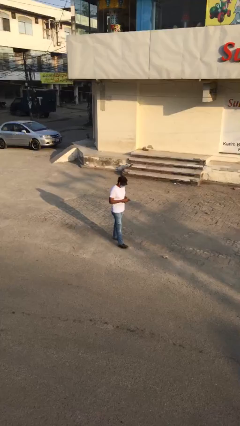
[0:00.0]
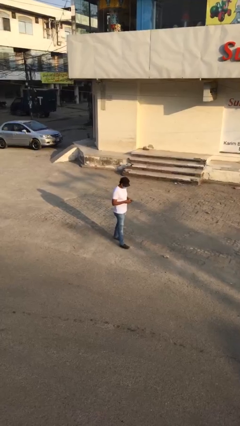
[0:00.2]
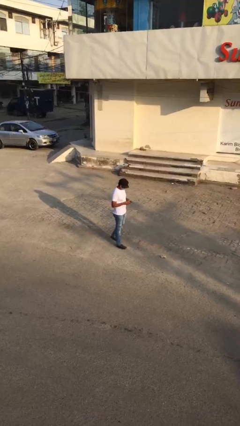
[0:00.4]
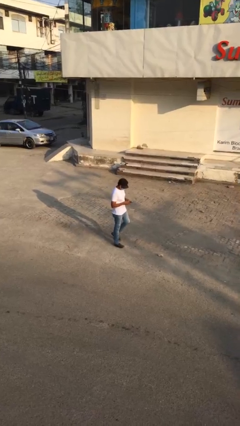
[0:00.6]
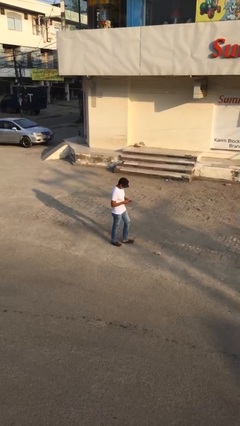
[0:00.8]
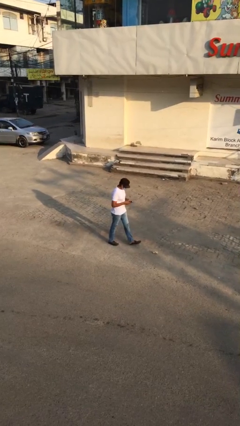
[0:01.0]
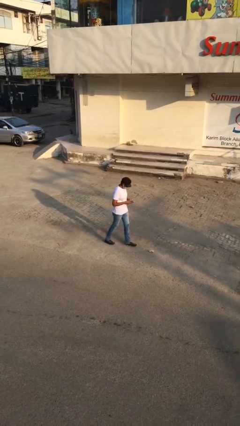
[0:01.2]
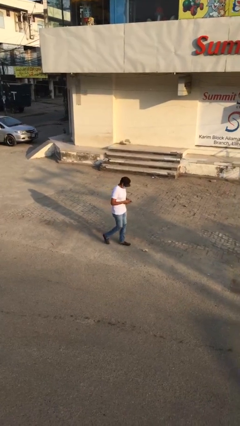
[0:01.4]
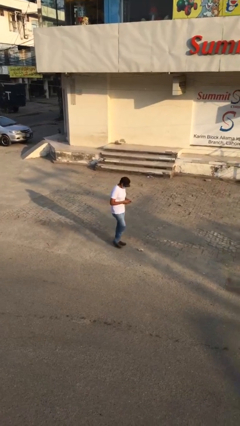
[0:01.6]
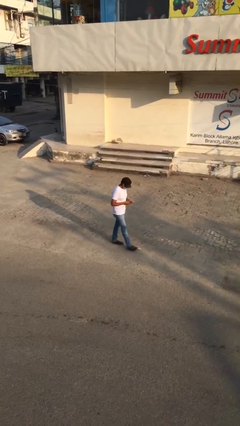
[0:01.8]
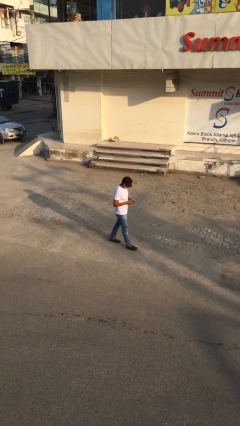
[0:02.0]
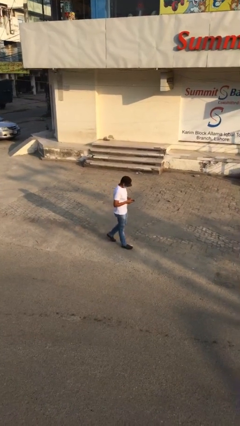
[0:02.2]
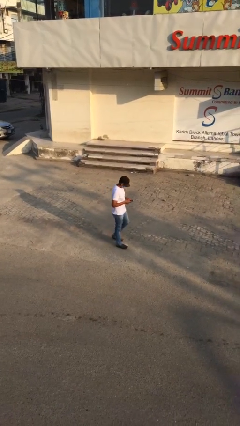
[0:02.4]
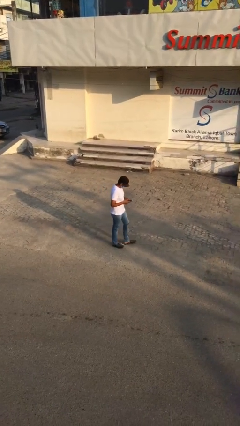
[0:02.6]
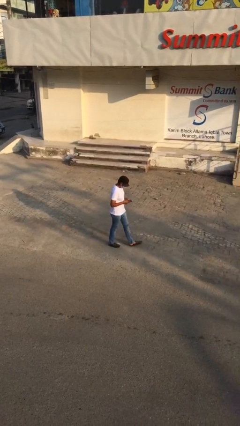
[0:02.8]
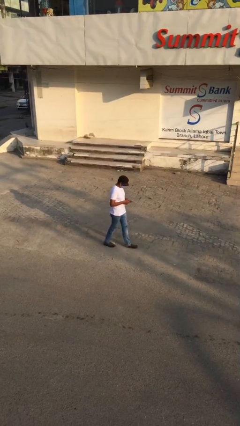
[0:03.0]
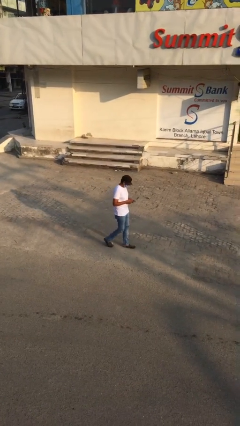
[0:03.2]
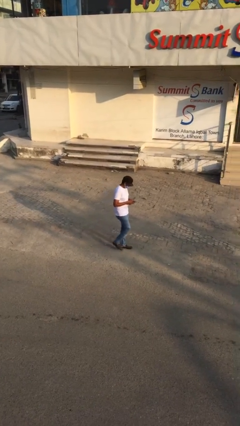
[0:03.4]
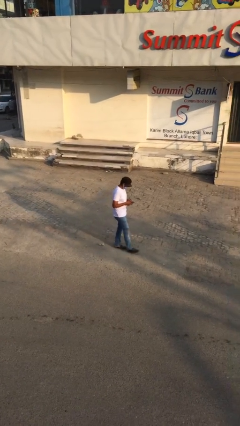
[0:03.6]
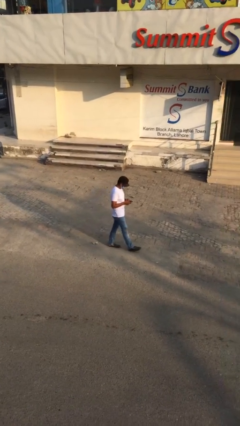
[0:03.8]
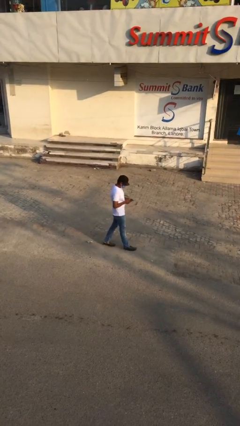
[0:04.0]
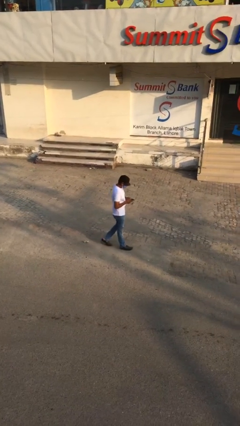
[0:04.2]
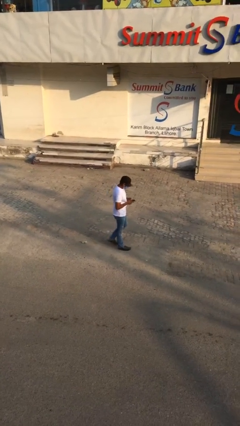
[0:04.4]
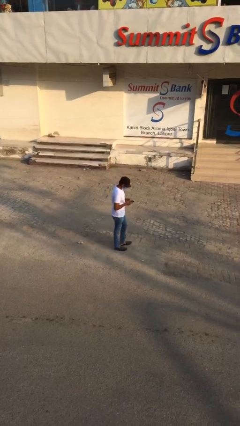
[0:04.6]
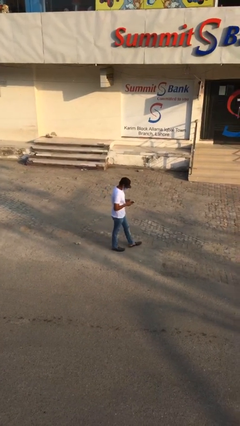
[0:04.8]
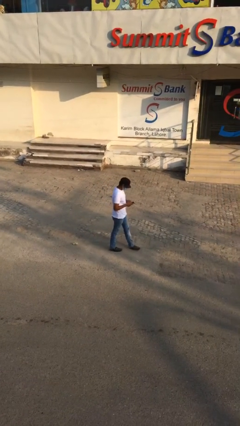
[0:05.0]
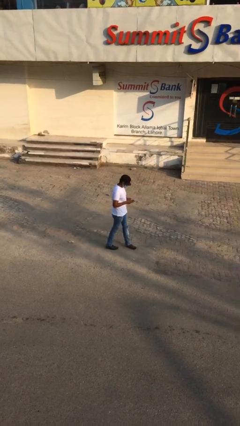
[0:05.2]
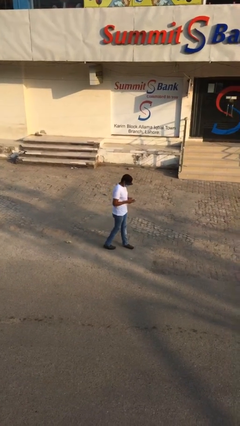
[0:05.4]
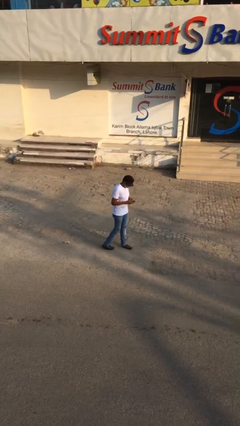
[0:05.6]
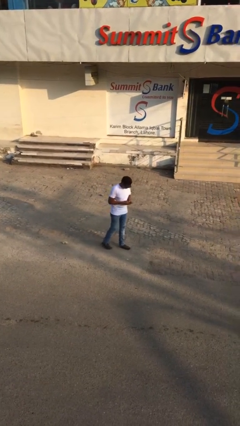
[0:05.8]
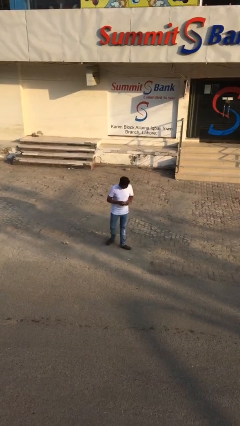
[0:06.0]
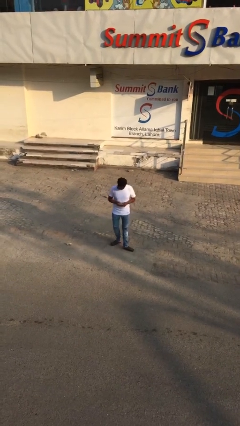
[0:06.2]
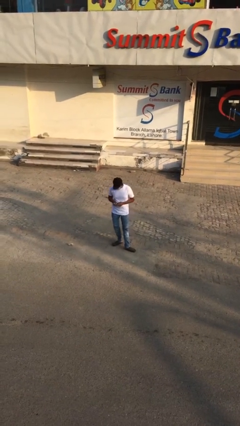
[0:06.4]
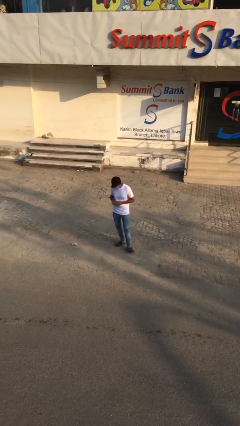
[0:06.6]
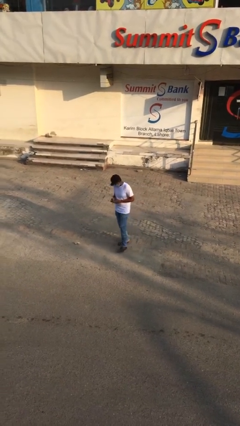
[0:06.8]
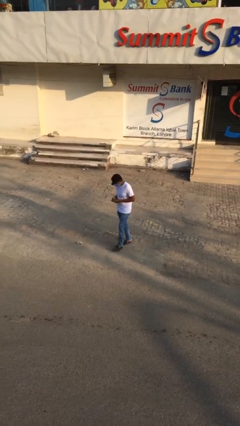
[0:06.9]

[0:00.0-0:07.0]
person texts on phone

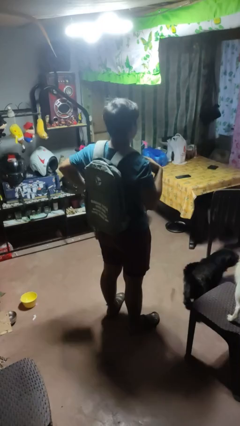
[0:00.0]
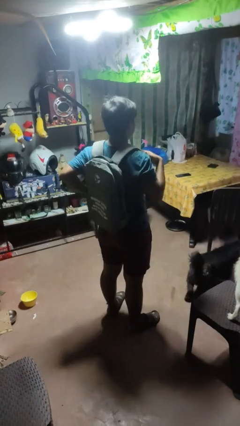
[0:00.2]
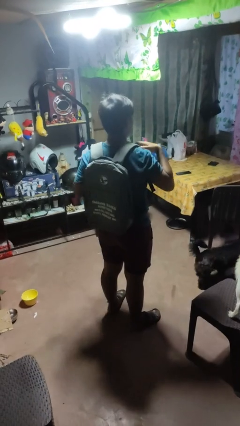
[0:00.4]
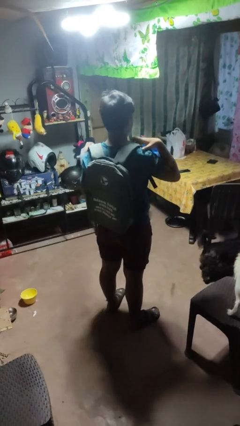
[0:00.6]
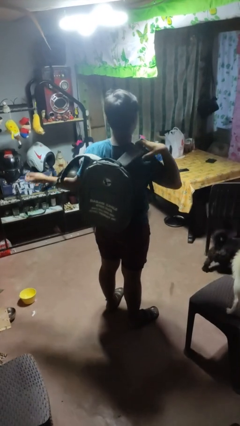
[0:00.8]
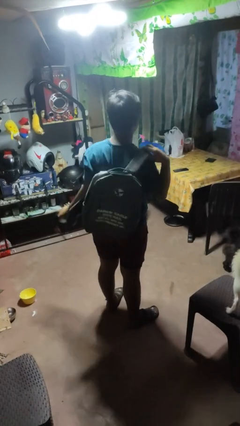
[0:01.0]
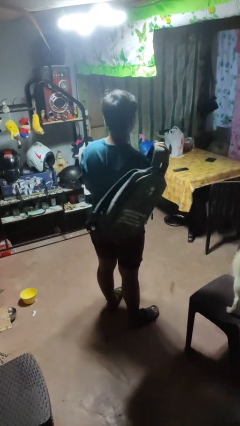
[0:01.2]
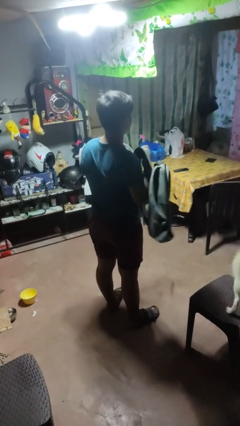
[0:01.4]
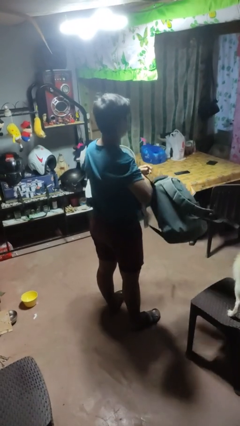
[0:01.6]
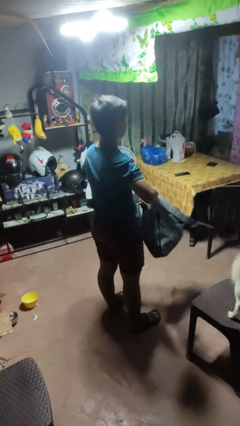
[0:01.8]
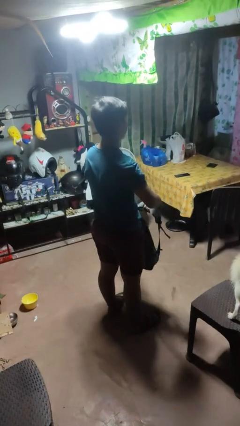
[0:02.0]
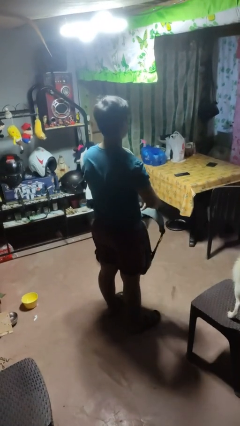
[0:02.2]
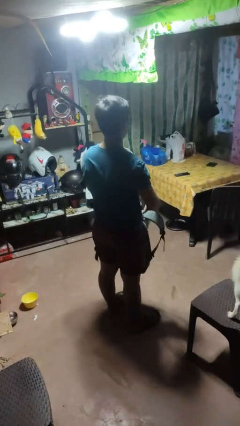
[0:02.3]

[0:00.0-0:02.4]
person takes off backpack

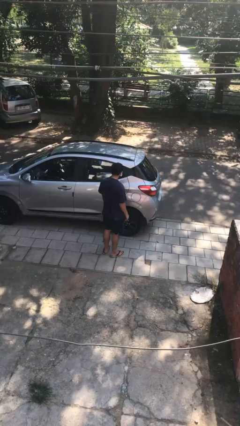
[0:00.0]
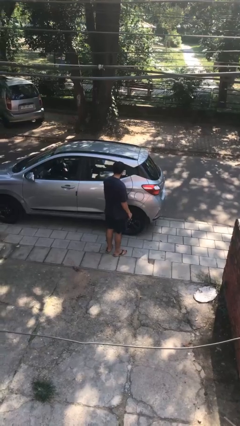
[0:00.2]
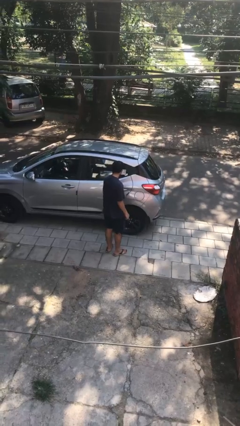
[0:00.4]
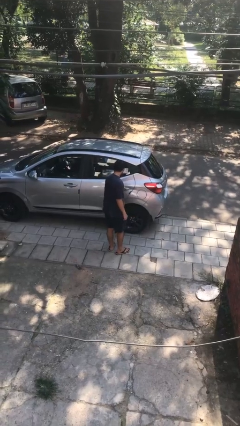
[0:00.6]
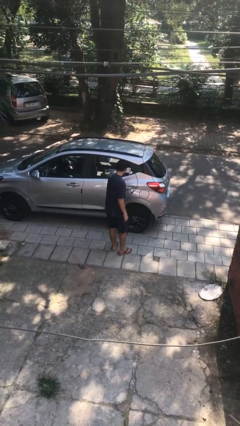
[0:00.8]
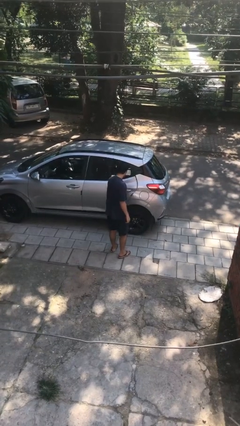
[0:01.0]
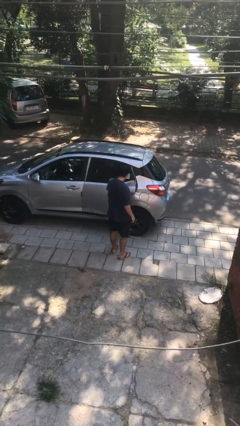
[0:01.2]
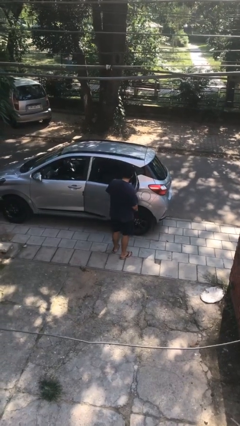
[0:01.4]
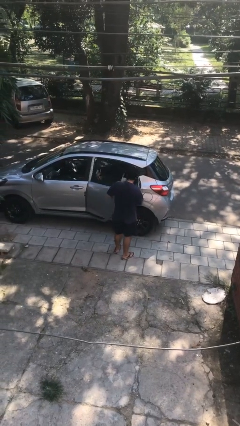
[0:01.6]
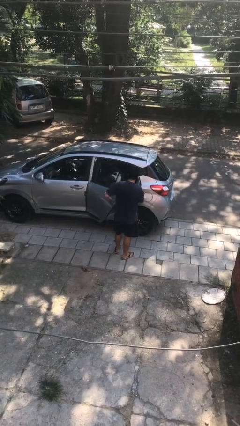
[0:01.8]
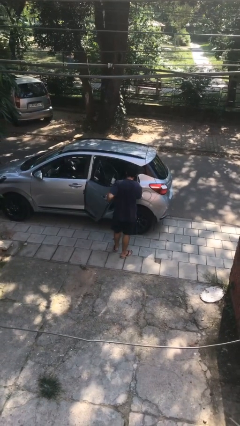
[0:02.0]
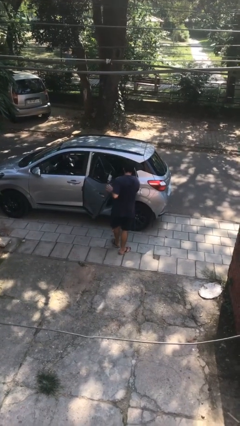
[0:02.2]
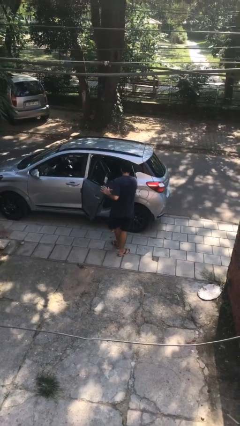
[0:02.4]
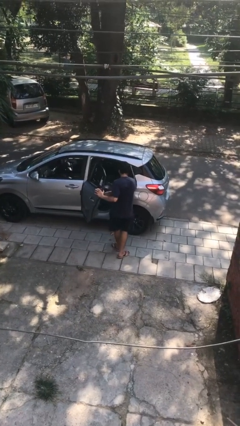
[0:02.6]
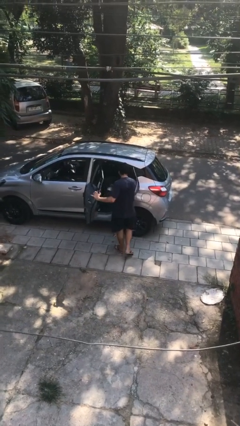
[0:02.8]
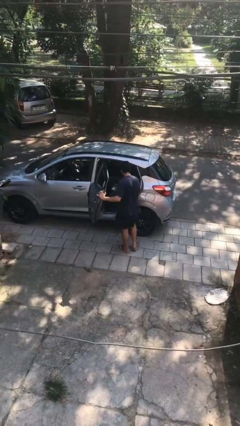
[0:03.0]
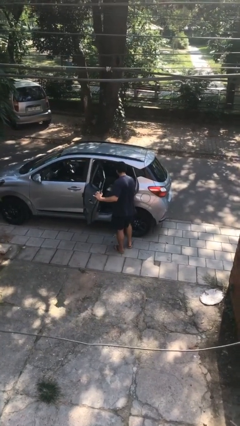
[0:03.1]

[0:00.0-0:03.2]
person opens car door

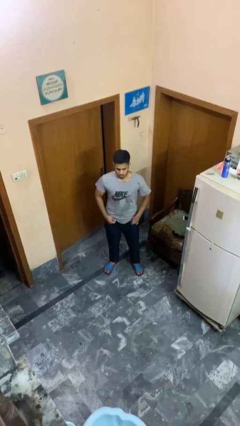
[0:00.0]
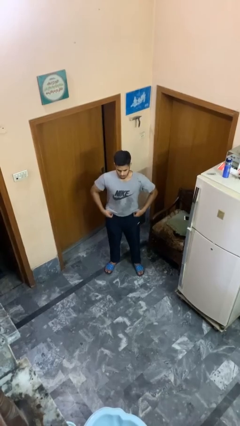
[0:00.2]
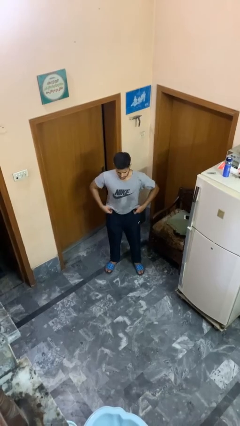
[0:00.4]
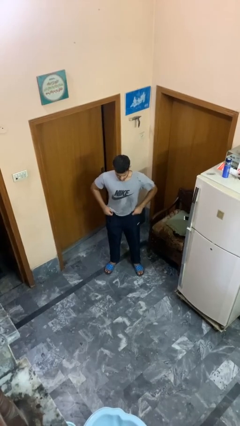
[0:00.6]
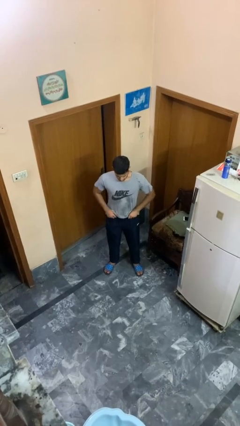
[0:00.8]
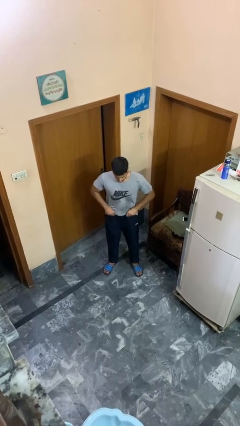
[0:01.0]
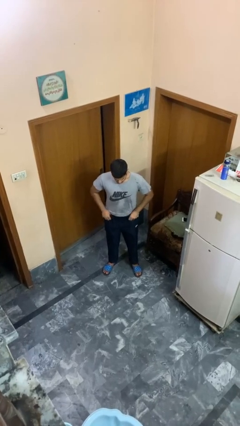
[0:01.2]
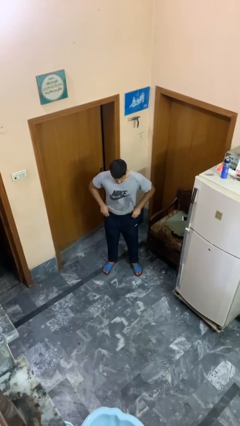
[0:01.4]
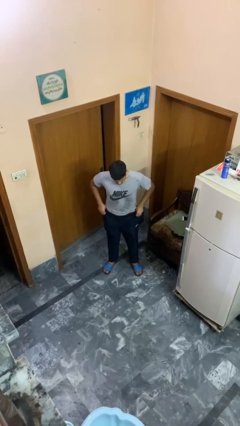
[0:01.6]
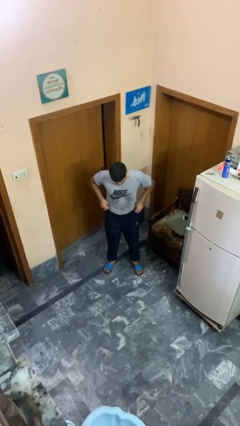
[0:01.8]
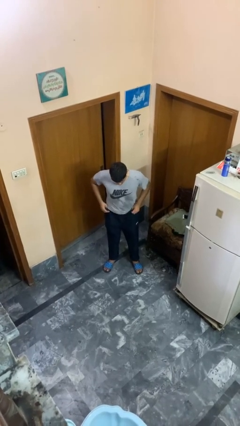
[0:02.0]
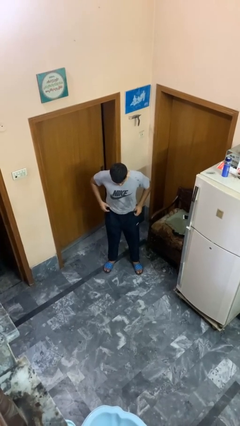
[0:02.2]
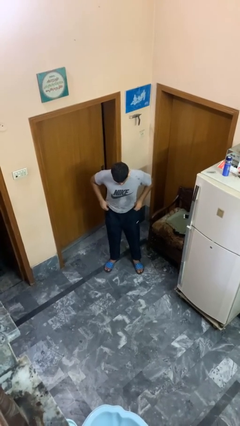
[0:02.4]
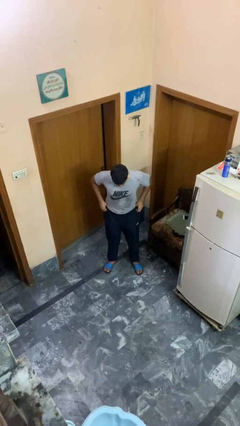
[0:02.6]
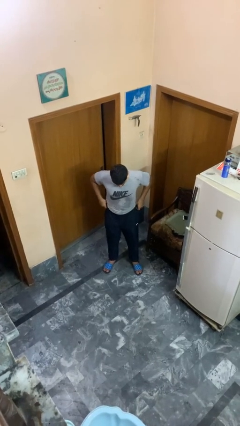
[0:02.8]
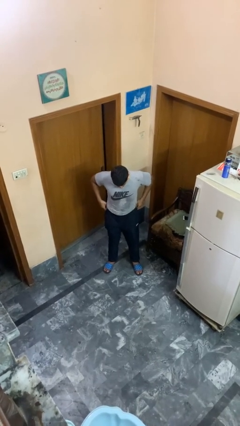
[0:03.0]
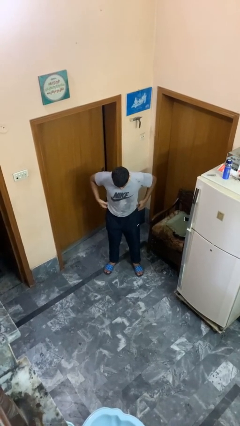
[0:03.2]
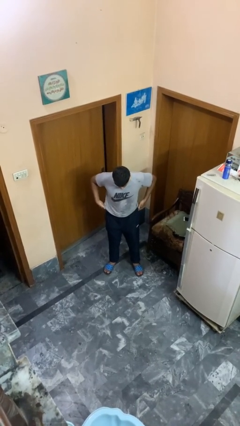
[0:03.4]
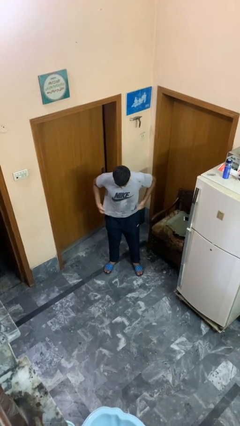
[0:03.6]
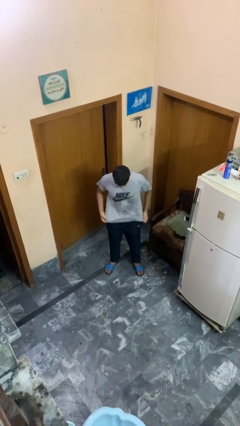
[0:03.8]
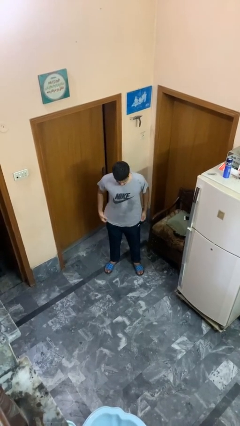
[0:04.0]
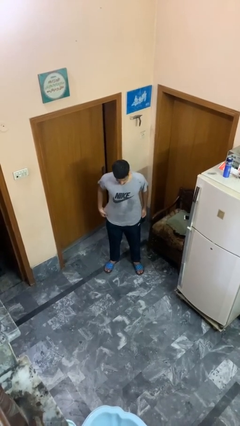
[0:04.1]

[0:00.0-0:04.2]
person hikes up pants

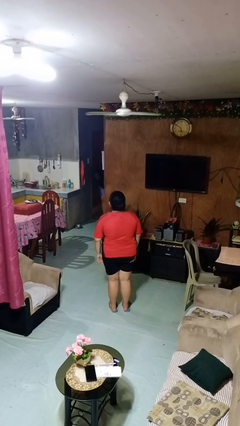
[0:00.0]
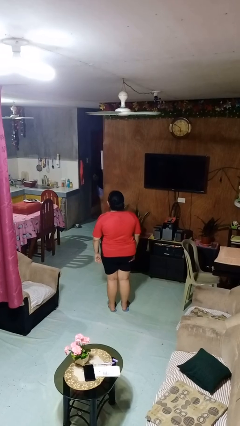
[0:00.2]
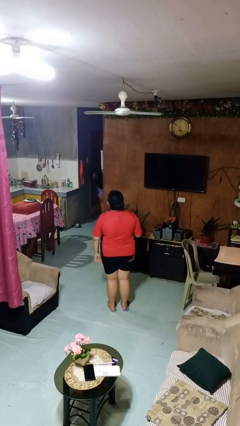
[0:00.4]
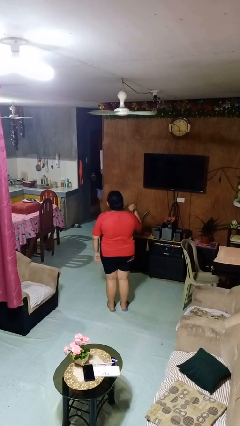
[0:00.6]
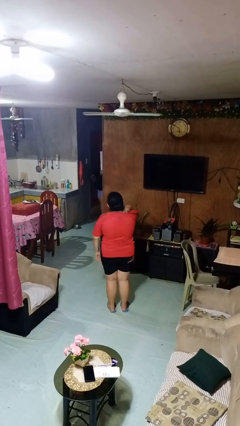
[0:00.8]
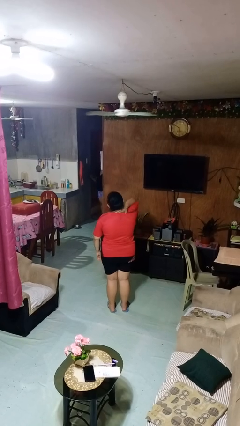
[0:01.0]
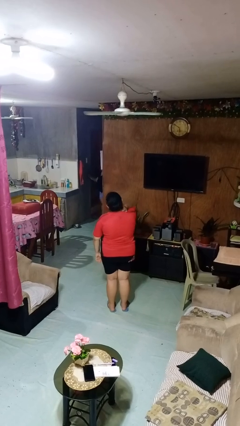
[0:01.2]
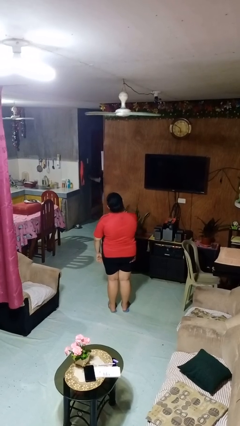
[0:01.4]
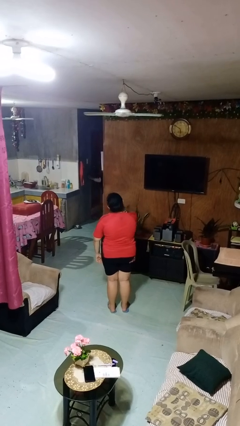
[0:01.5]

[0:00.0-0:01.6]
person rubs neck
